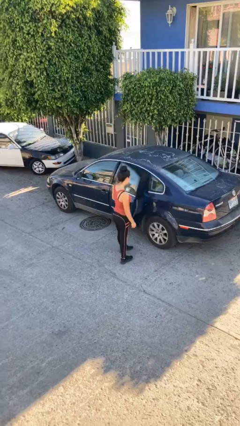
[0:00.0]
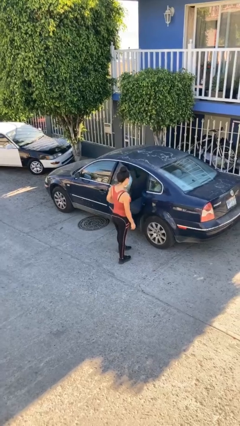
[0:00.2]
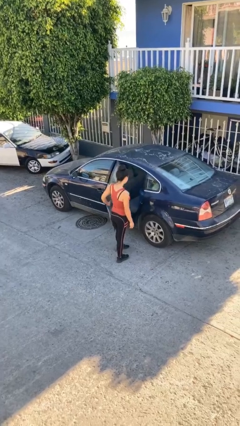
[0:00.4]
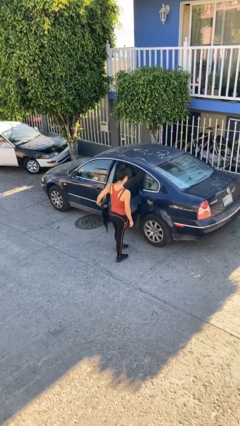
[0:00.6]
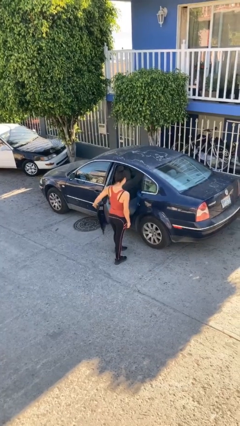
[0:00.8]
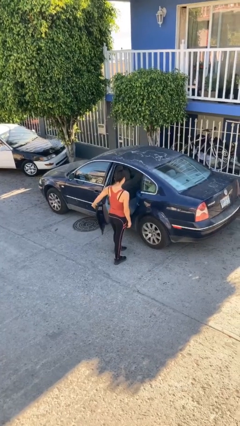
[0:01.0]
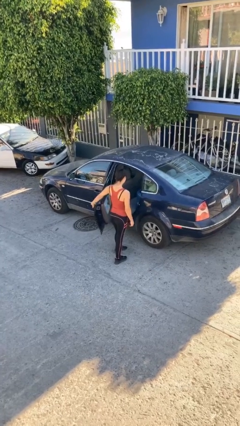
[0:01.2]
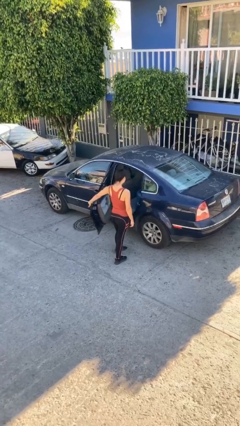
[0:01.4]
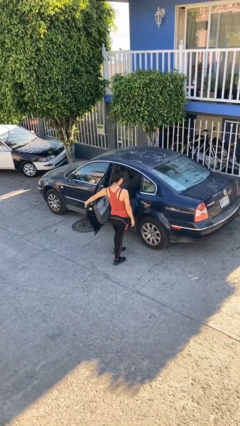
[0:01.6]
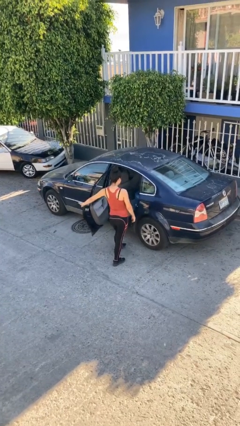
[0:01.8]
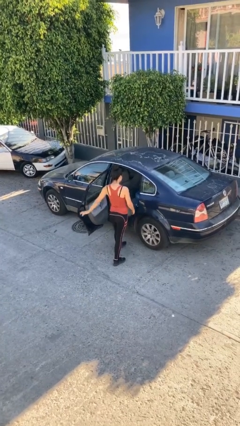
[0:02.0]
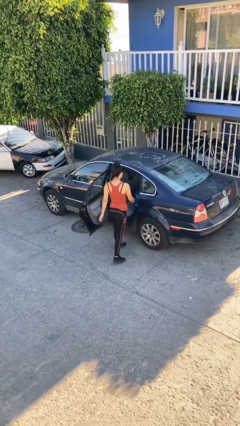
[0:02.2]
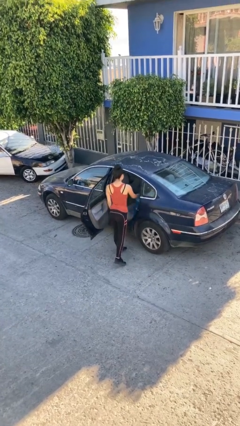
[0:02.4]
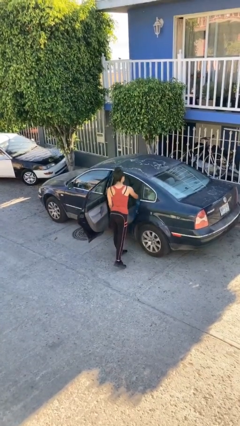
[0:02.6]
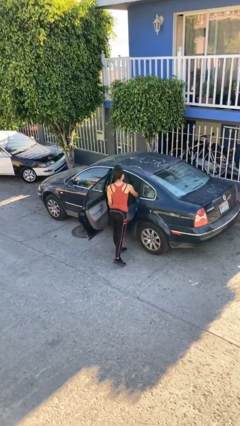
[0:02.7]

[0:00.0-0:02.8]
person opens car door

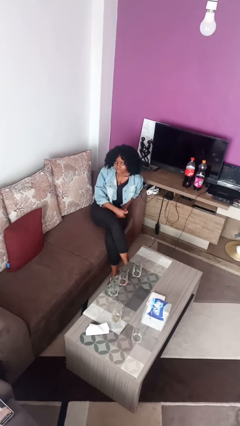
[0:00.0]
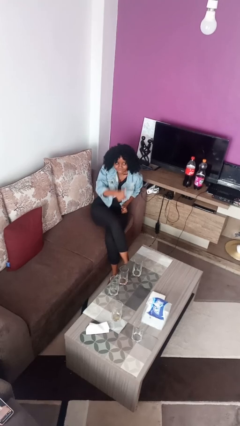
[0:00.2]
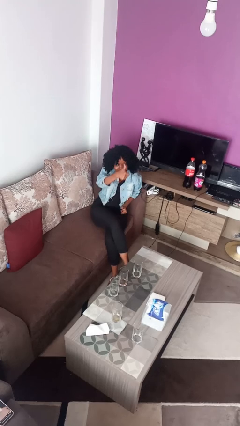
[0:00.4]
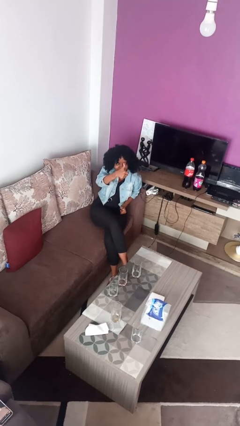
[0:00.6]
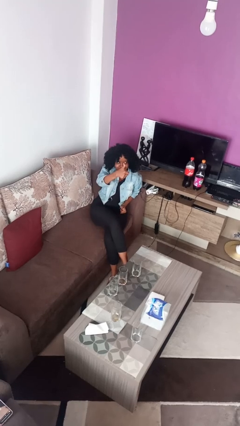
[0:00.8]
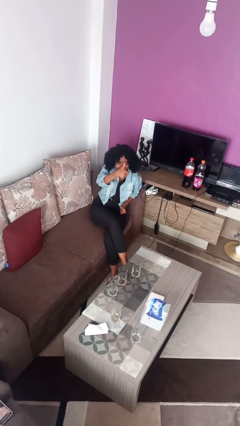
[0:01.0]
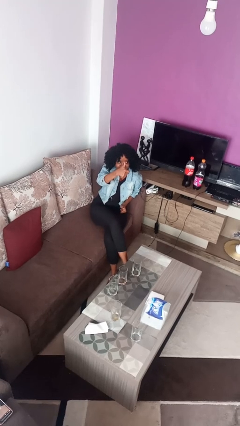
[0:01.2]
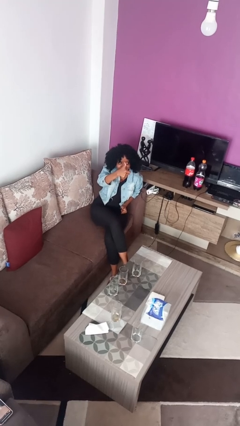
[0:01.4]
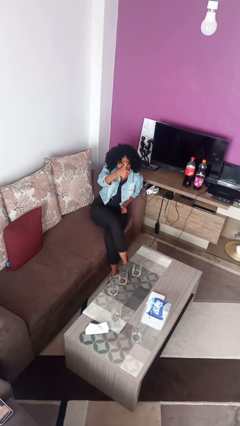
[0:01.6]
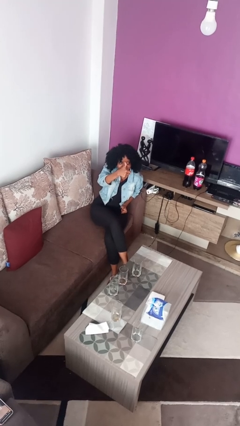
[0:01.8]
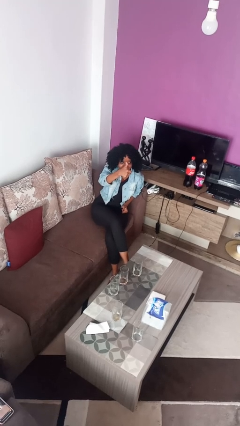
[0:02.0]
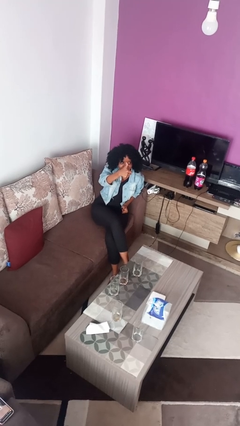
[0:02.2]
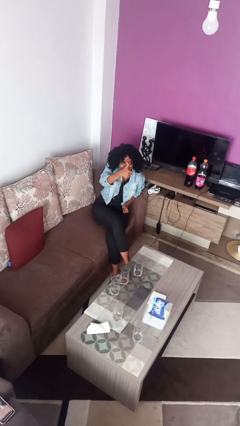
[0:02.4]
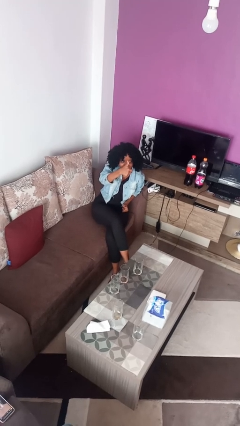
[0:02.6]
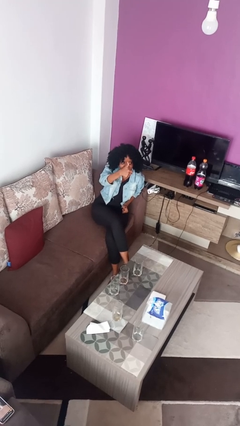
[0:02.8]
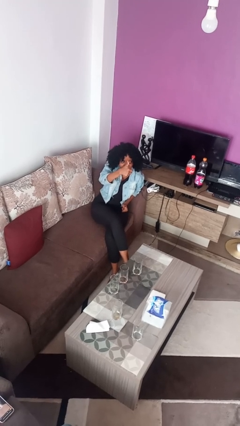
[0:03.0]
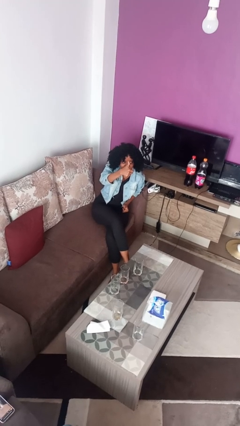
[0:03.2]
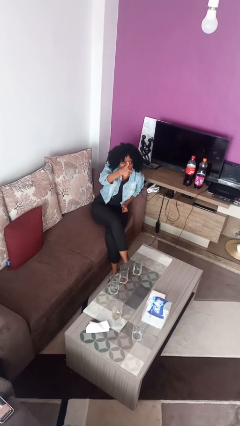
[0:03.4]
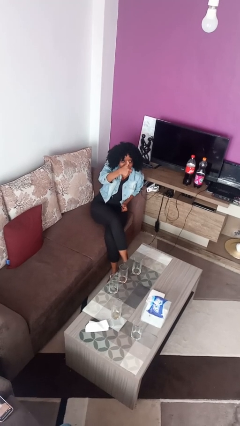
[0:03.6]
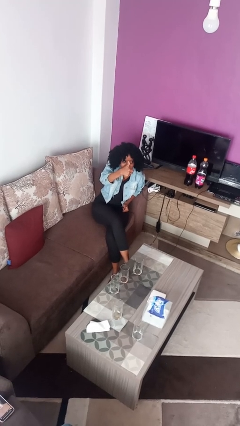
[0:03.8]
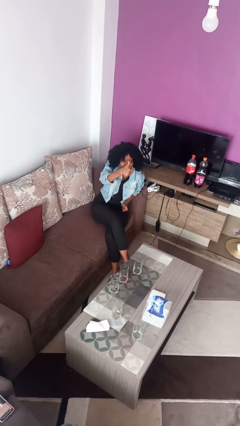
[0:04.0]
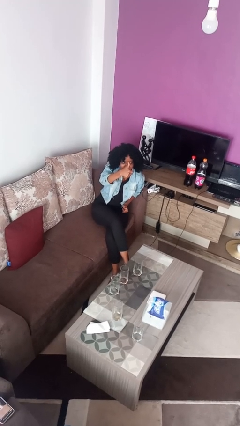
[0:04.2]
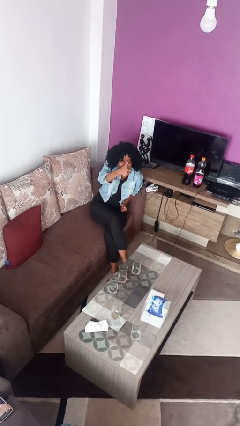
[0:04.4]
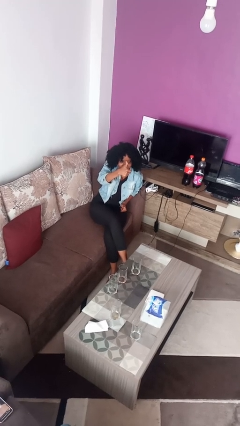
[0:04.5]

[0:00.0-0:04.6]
person gestures thumbs up

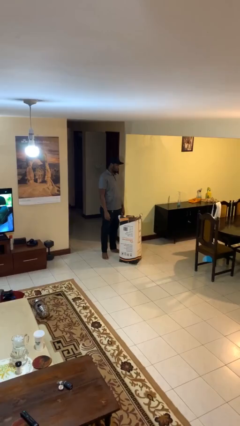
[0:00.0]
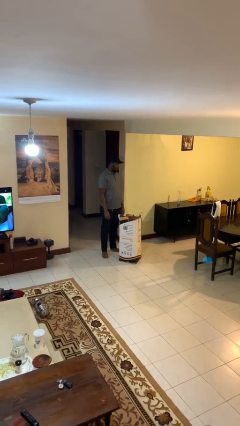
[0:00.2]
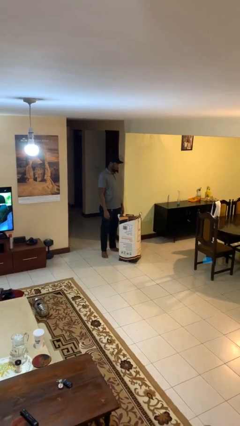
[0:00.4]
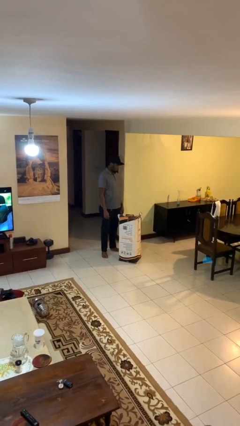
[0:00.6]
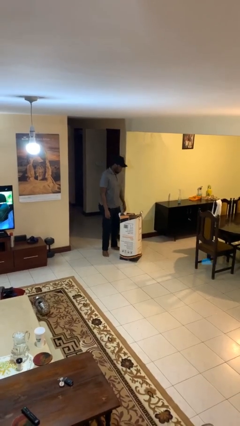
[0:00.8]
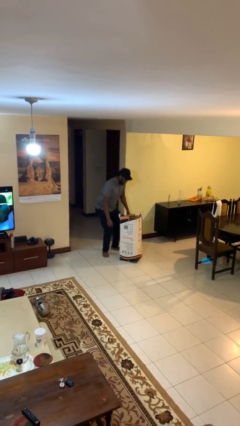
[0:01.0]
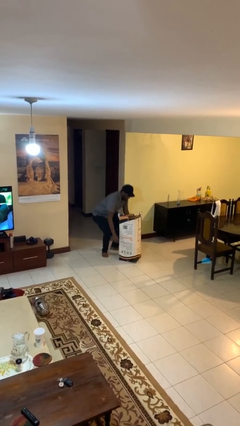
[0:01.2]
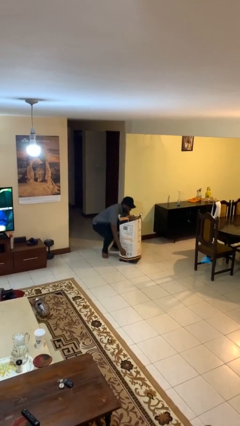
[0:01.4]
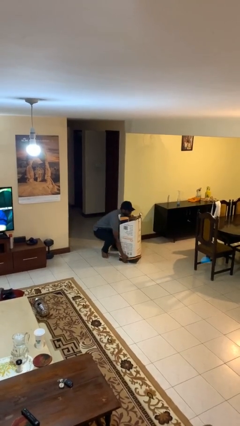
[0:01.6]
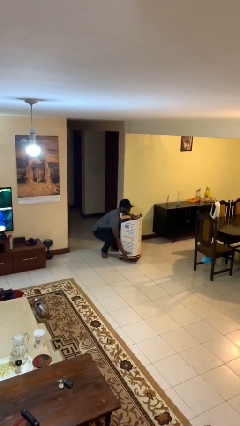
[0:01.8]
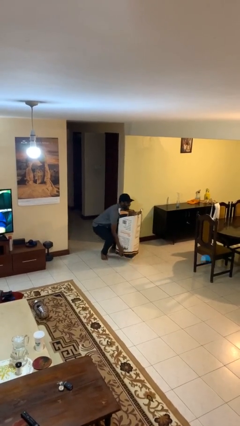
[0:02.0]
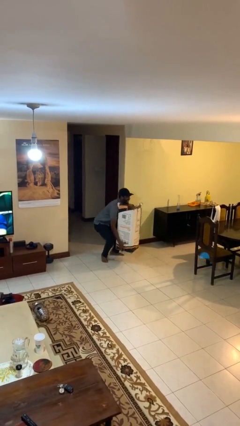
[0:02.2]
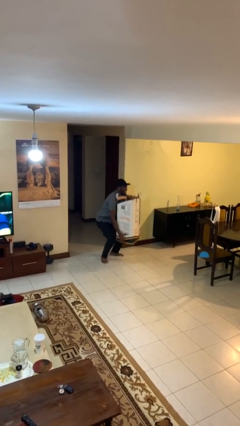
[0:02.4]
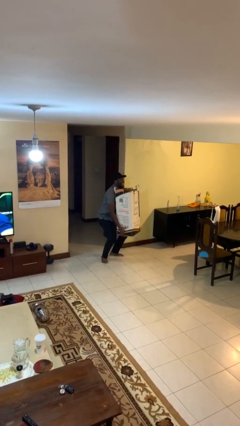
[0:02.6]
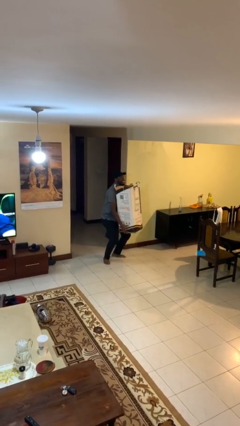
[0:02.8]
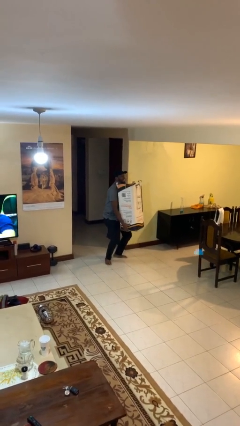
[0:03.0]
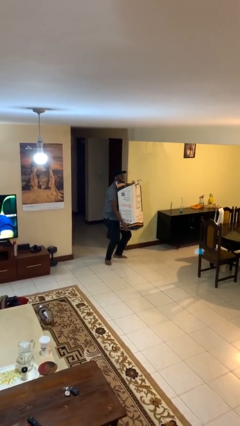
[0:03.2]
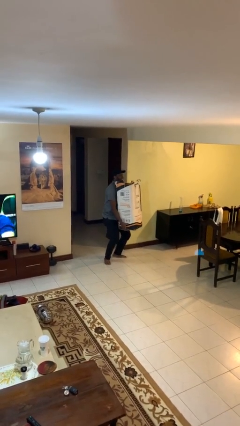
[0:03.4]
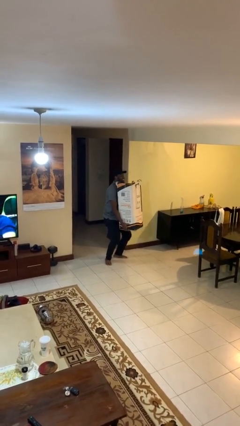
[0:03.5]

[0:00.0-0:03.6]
person picks up object from floor

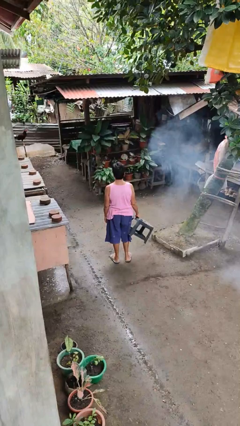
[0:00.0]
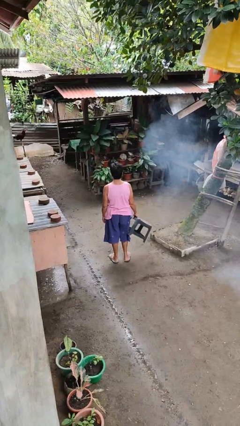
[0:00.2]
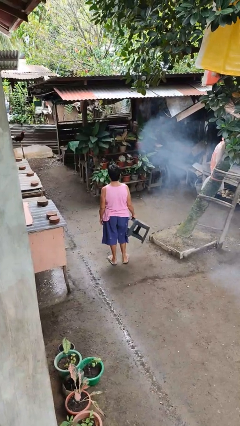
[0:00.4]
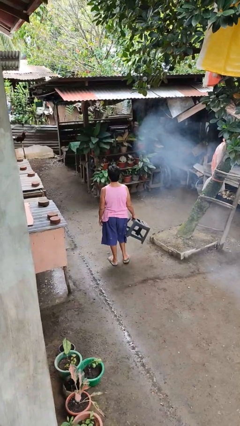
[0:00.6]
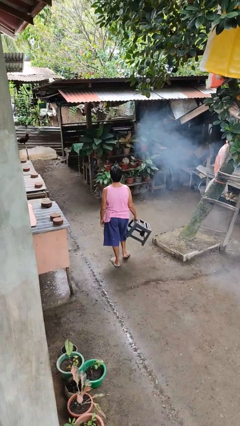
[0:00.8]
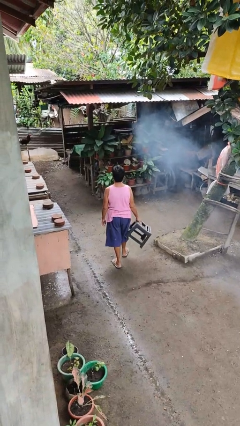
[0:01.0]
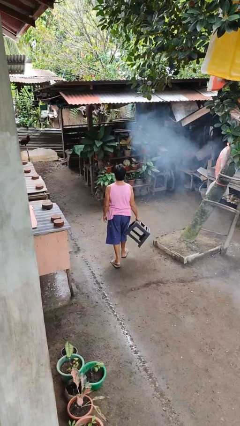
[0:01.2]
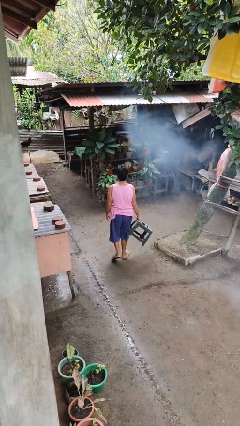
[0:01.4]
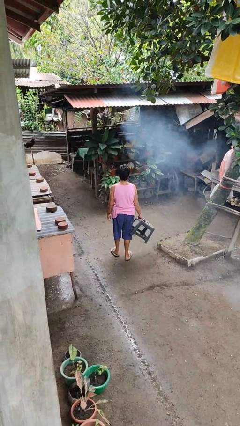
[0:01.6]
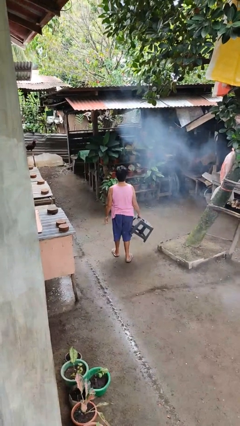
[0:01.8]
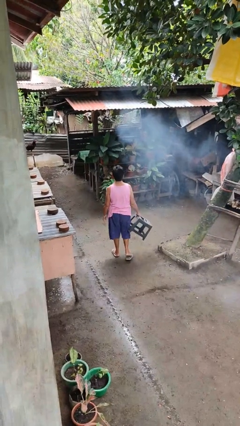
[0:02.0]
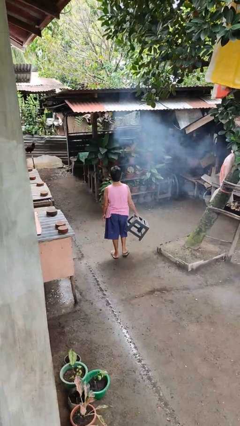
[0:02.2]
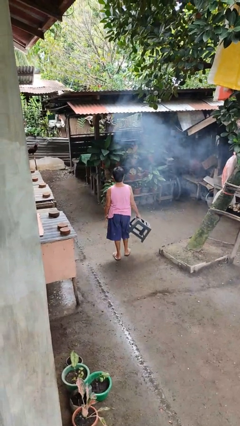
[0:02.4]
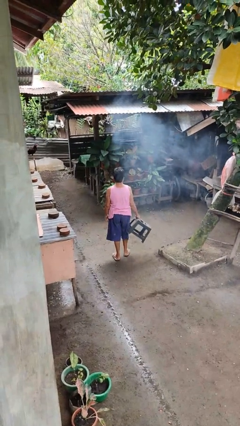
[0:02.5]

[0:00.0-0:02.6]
person carries furniture

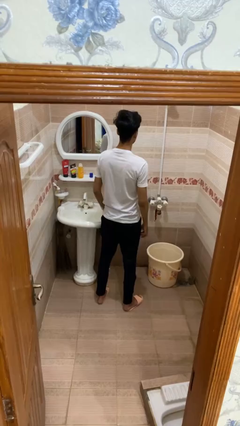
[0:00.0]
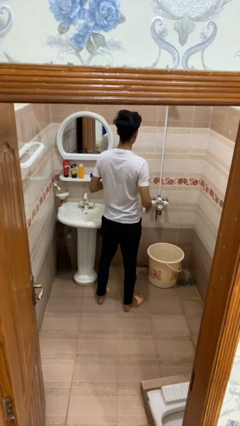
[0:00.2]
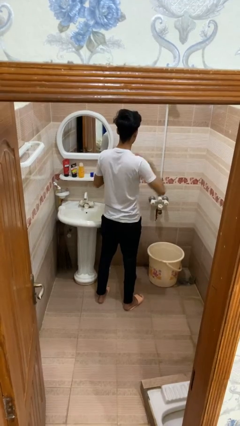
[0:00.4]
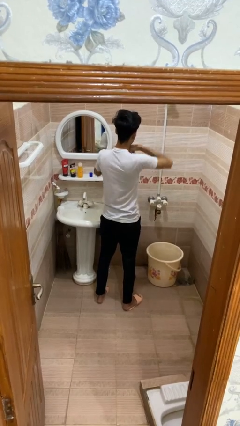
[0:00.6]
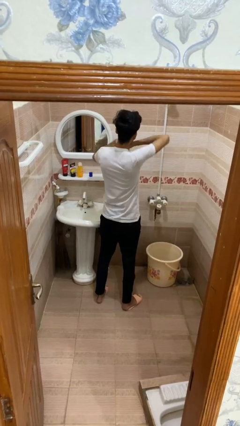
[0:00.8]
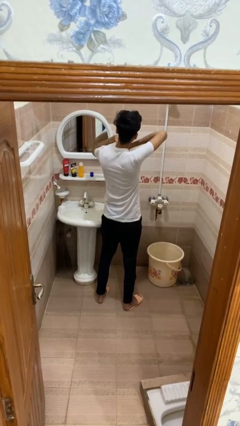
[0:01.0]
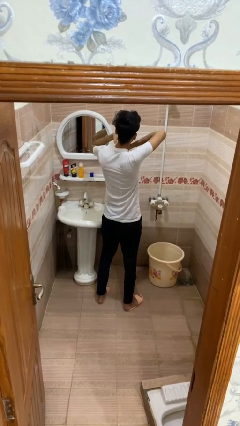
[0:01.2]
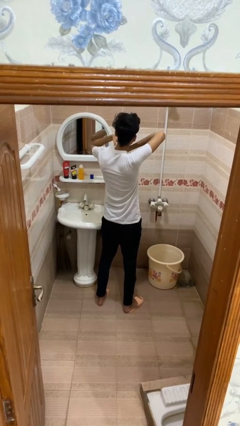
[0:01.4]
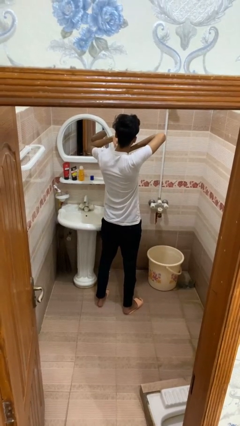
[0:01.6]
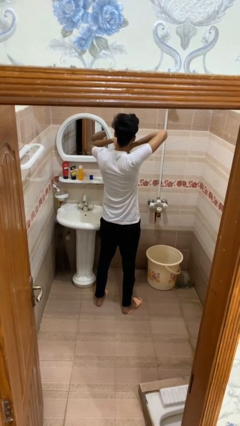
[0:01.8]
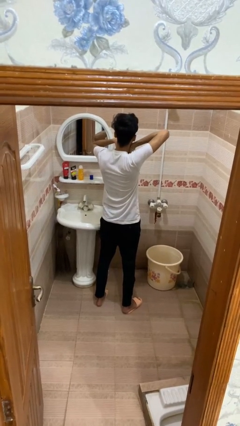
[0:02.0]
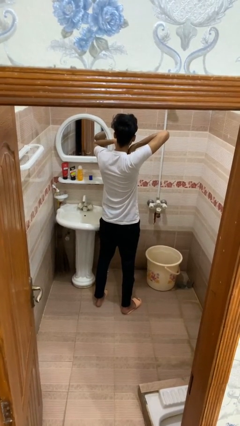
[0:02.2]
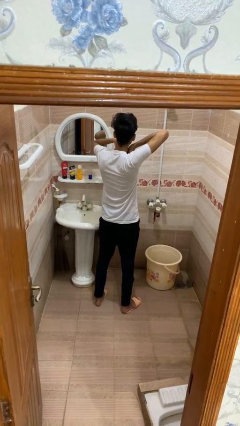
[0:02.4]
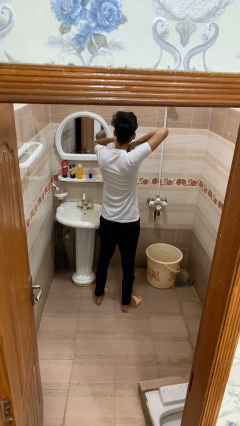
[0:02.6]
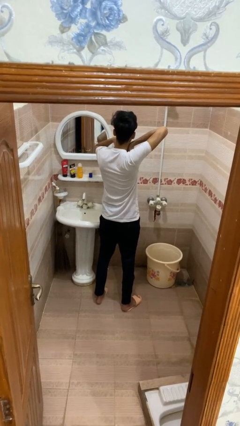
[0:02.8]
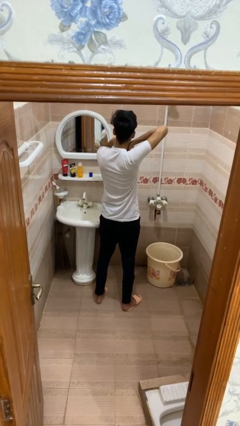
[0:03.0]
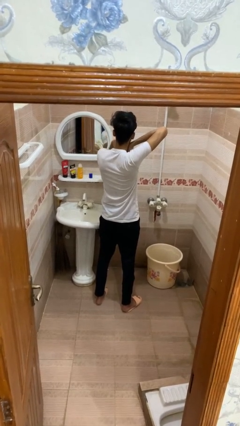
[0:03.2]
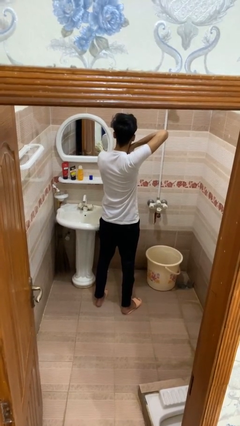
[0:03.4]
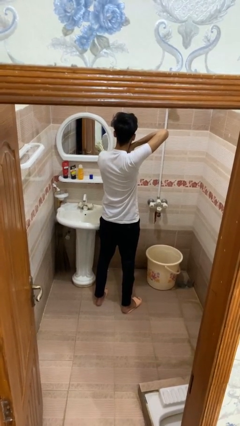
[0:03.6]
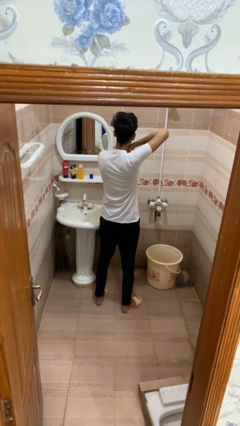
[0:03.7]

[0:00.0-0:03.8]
person applies deodorant

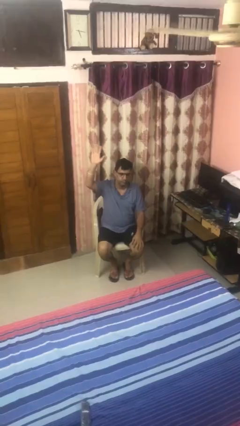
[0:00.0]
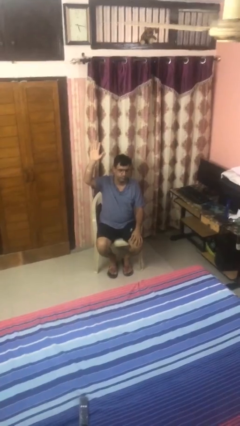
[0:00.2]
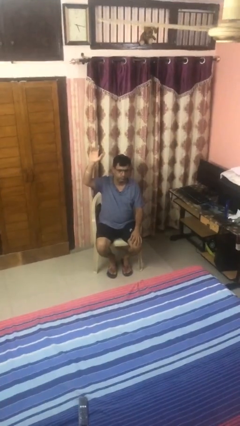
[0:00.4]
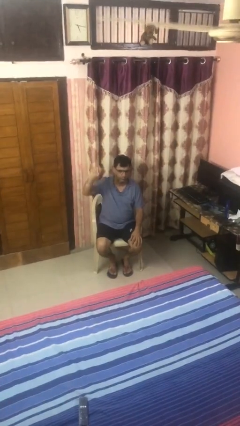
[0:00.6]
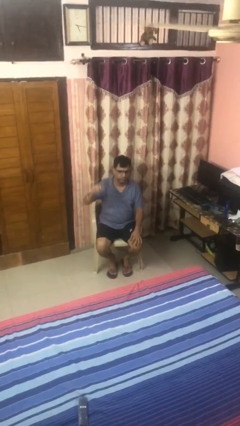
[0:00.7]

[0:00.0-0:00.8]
person gestures lower hand
